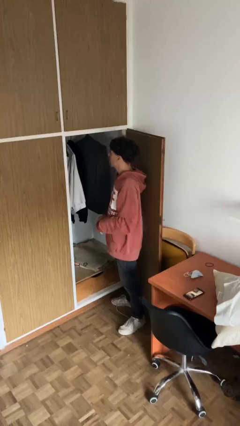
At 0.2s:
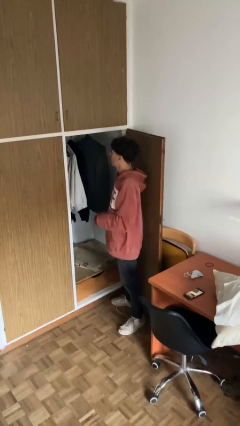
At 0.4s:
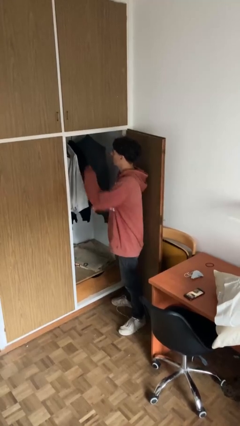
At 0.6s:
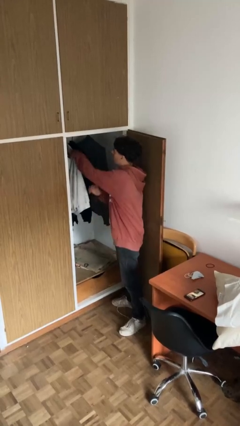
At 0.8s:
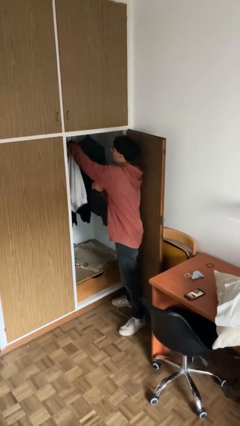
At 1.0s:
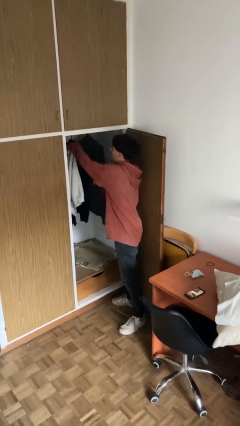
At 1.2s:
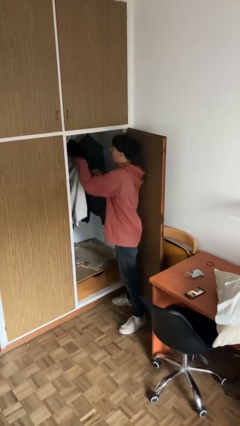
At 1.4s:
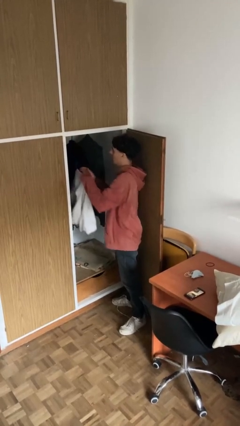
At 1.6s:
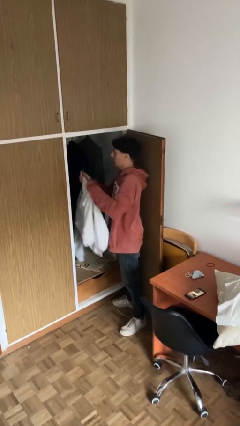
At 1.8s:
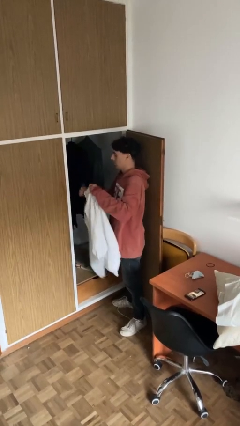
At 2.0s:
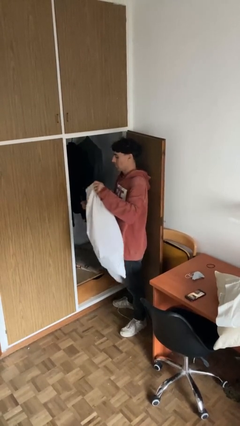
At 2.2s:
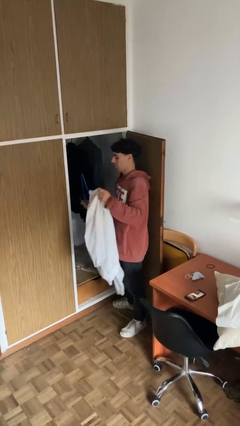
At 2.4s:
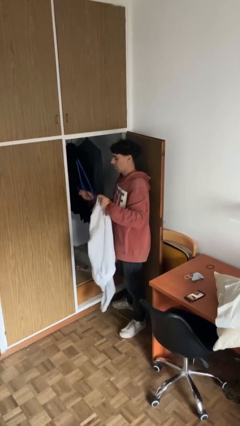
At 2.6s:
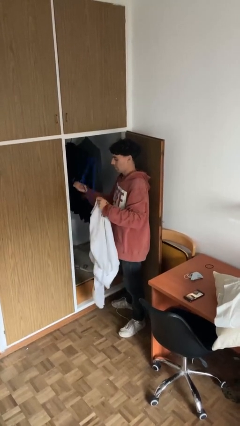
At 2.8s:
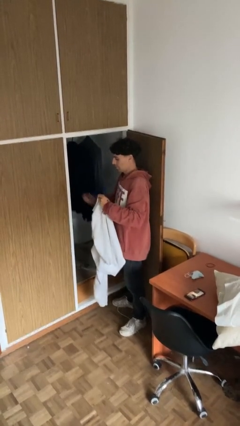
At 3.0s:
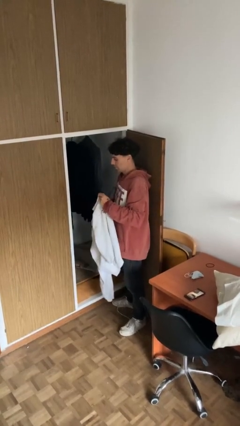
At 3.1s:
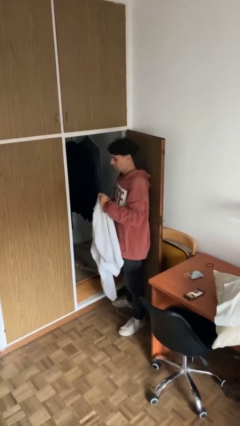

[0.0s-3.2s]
person takes clothes from closet

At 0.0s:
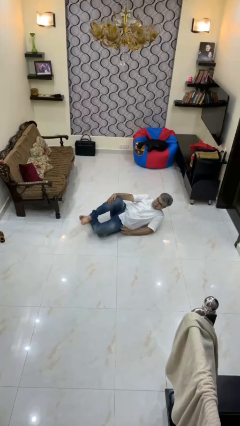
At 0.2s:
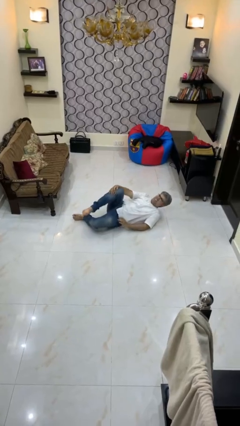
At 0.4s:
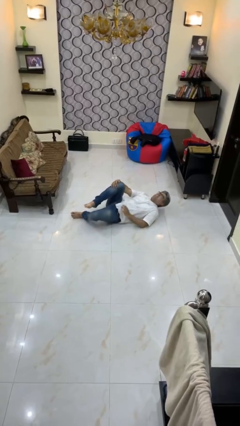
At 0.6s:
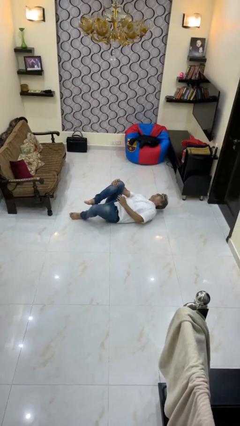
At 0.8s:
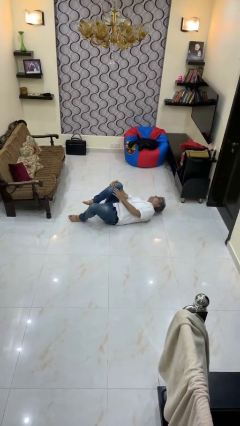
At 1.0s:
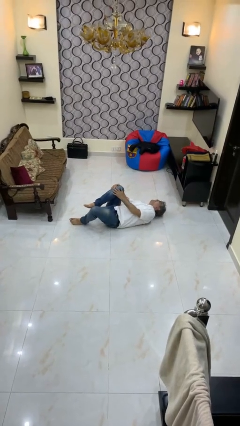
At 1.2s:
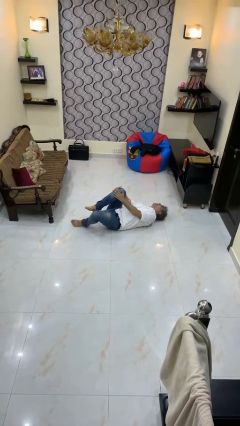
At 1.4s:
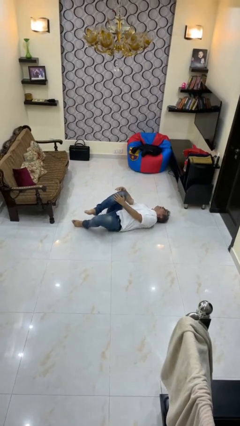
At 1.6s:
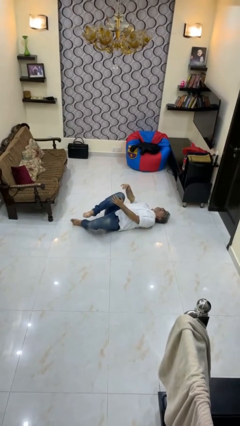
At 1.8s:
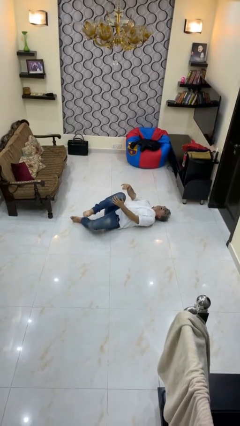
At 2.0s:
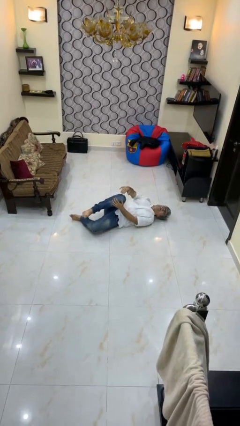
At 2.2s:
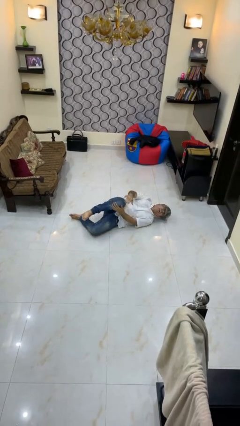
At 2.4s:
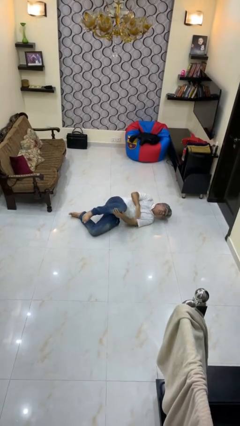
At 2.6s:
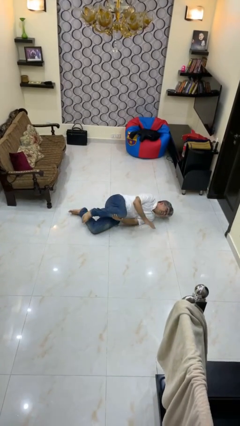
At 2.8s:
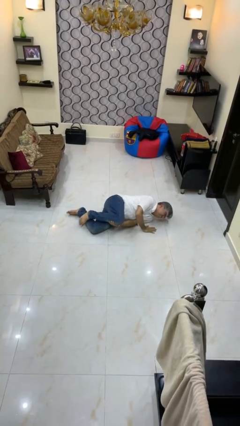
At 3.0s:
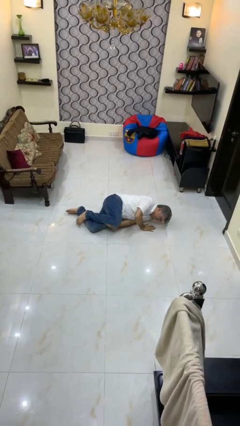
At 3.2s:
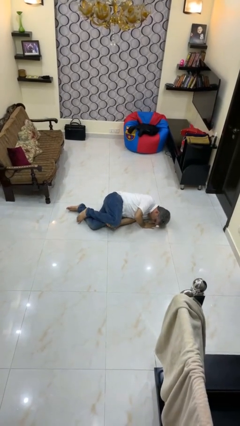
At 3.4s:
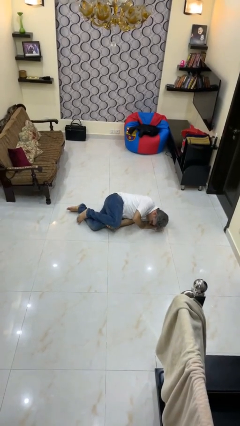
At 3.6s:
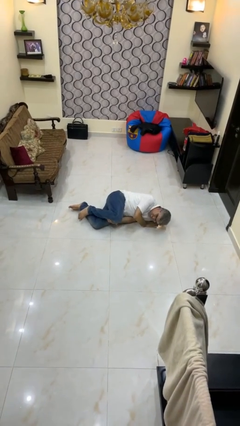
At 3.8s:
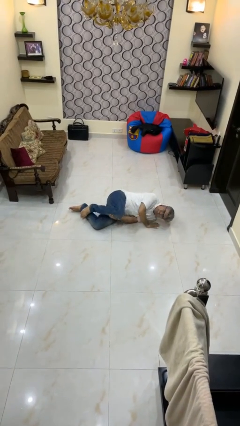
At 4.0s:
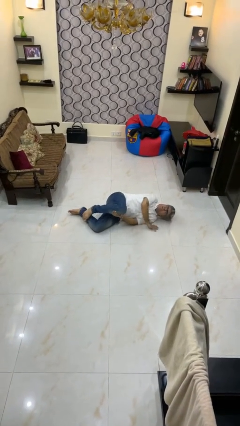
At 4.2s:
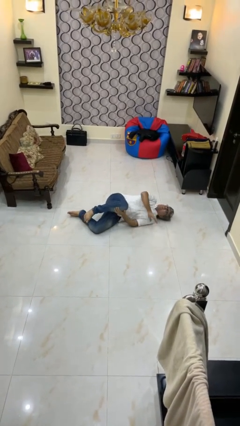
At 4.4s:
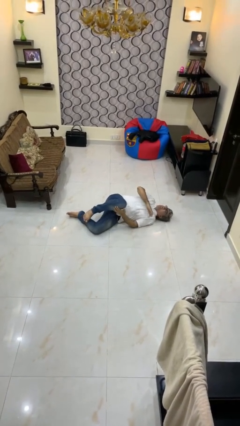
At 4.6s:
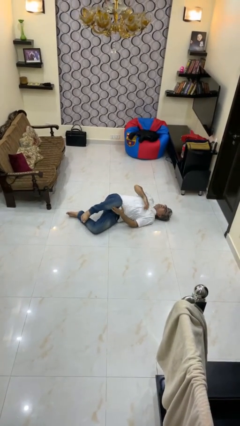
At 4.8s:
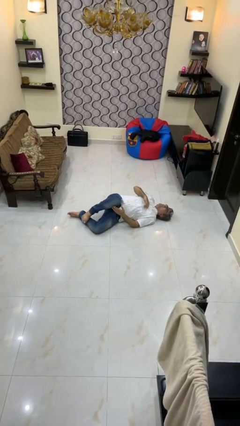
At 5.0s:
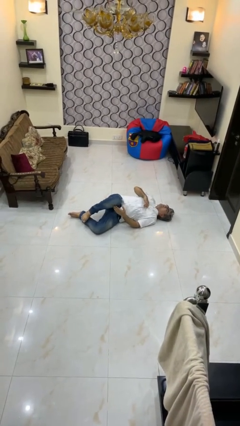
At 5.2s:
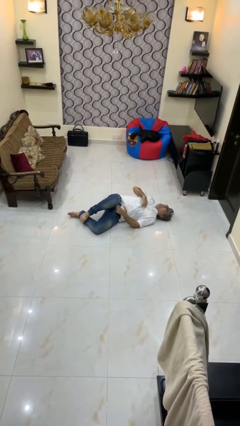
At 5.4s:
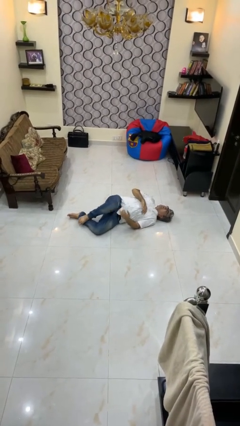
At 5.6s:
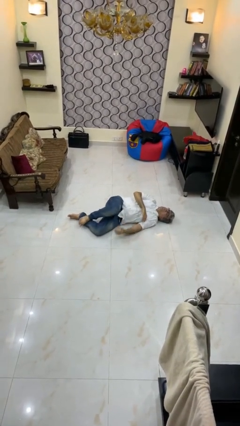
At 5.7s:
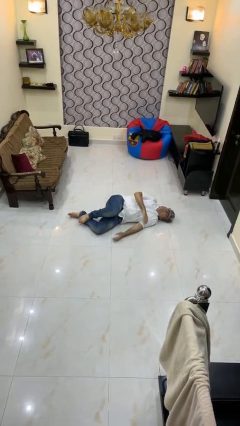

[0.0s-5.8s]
person lies down on floor

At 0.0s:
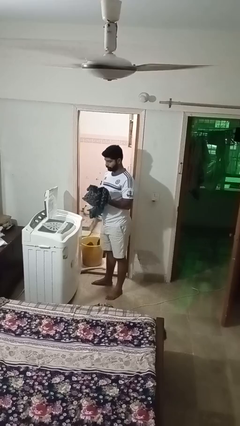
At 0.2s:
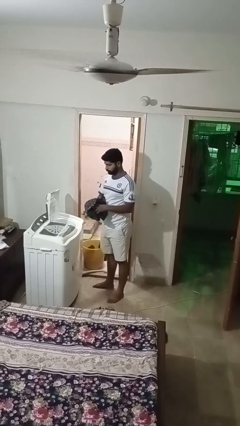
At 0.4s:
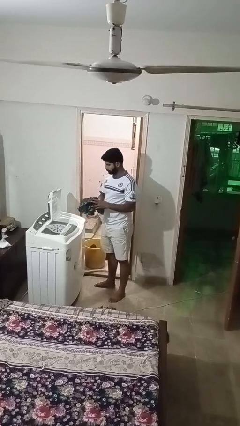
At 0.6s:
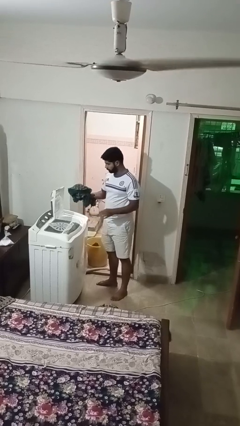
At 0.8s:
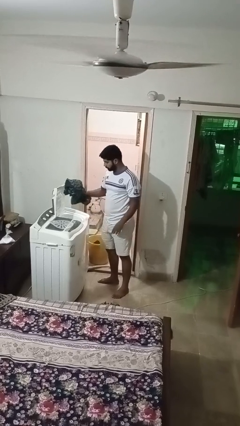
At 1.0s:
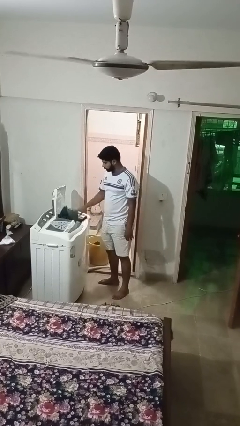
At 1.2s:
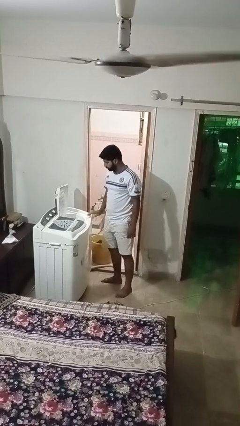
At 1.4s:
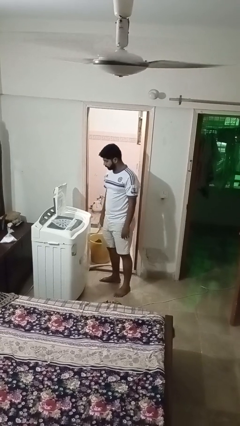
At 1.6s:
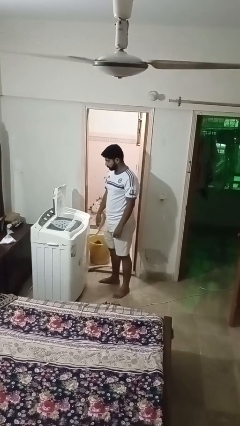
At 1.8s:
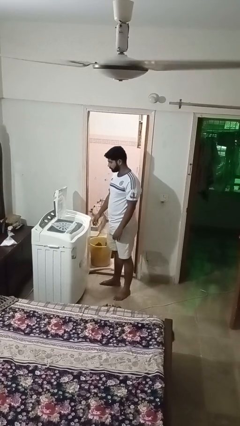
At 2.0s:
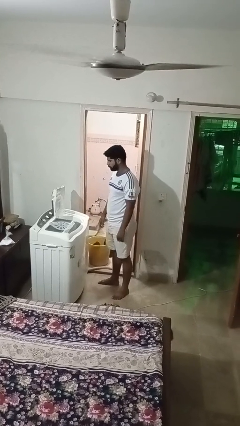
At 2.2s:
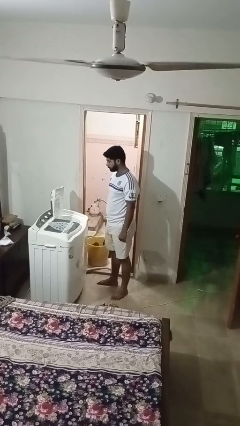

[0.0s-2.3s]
person loads dryer

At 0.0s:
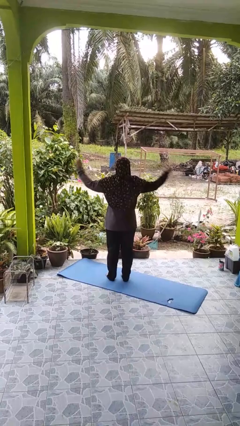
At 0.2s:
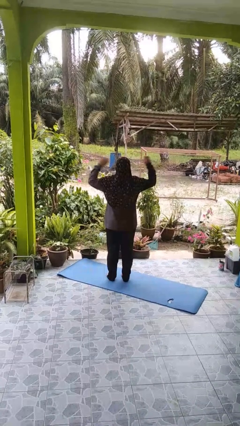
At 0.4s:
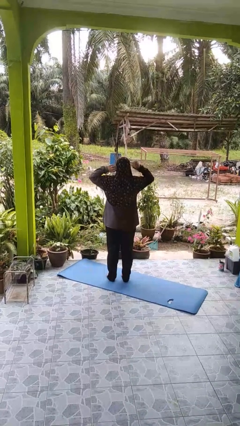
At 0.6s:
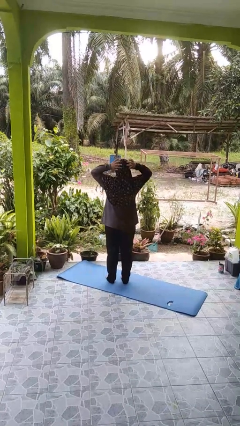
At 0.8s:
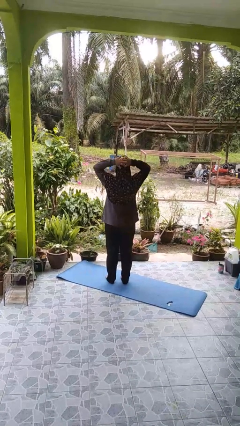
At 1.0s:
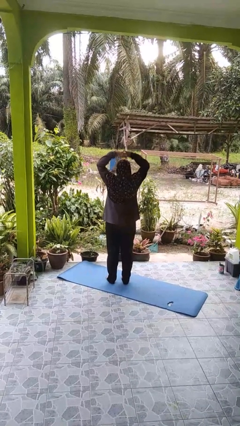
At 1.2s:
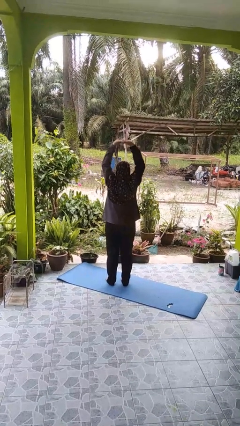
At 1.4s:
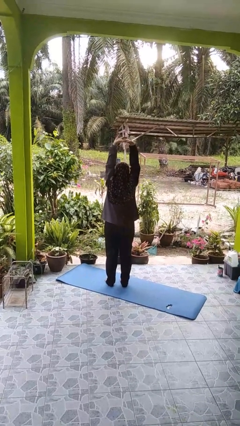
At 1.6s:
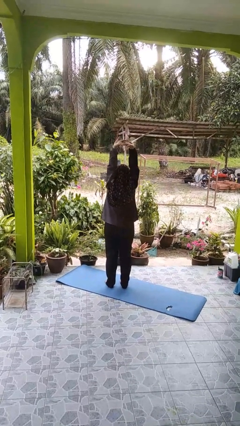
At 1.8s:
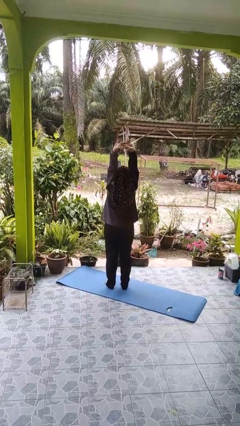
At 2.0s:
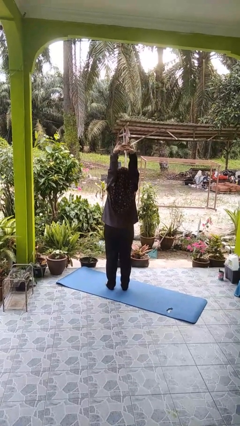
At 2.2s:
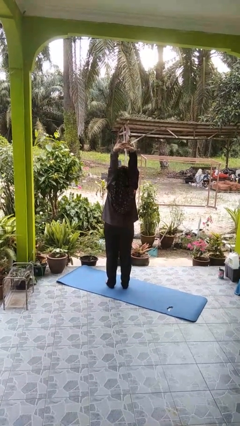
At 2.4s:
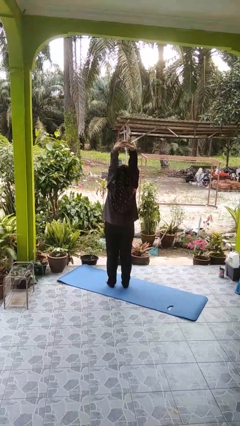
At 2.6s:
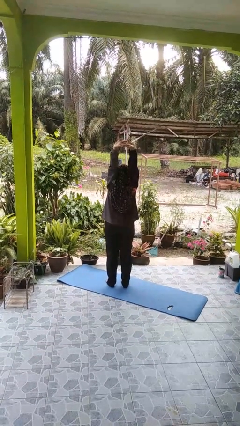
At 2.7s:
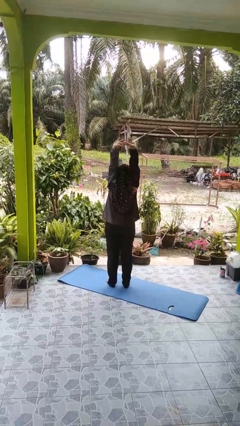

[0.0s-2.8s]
person stretches arms over head

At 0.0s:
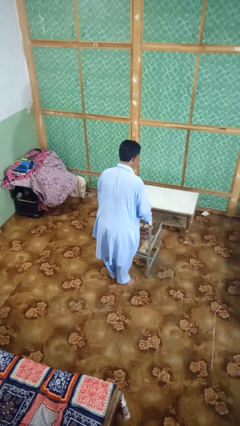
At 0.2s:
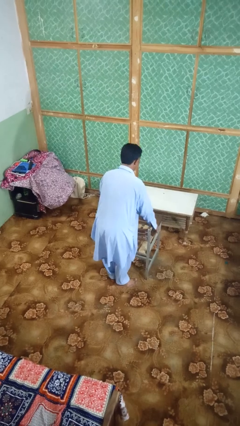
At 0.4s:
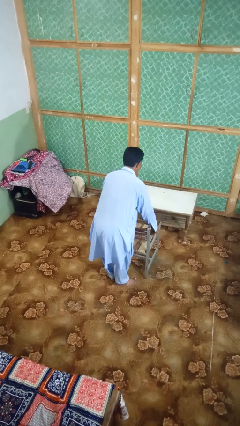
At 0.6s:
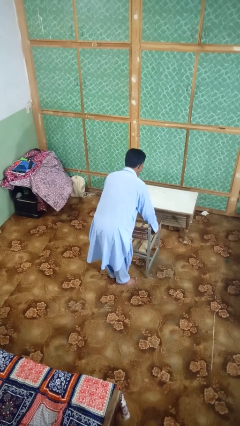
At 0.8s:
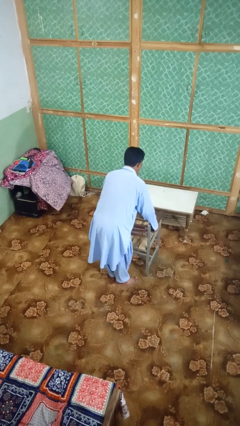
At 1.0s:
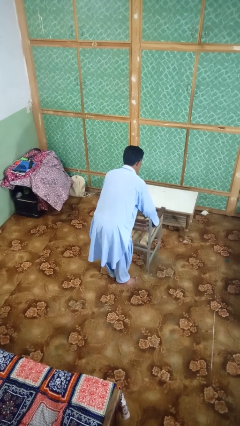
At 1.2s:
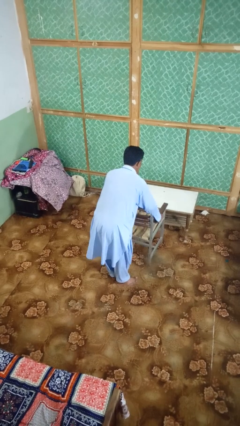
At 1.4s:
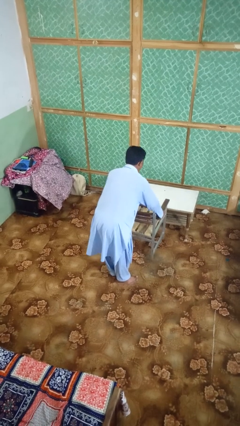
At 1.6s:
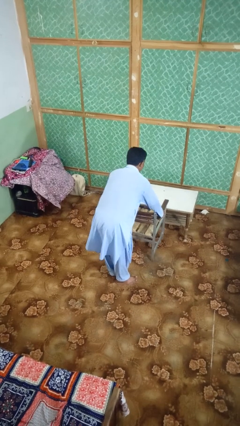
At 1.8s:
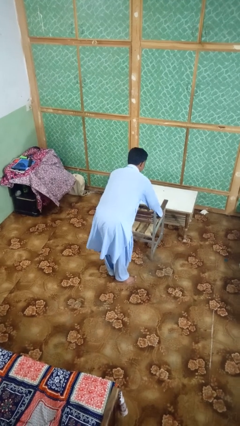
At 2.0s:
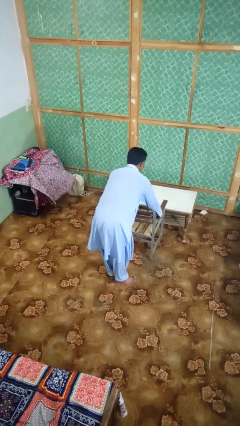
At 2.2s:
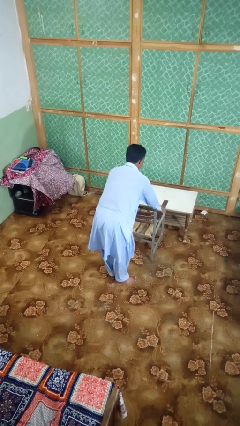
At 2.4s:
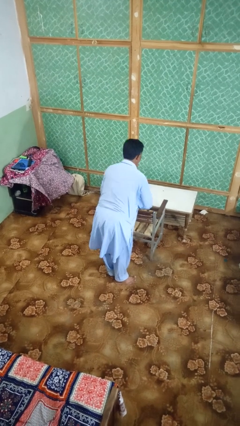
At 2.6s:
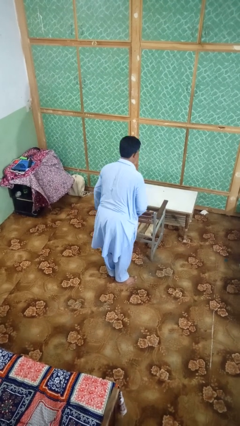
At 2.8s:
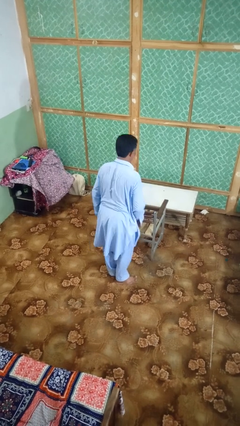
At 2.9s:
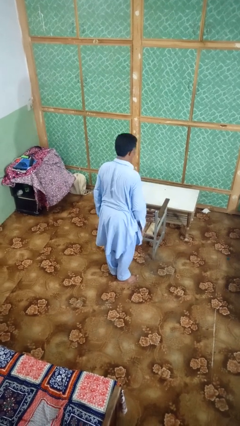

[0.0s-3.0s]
person pushes in chair

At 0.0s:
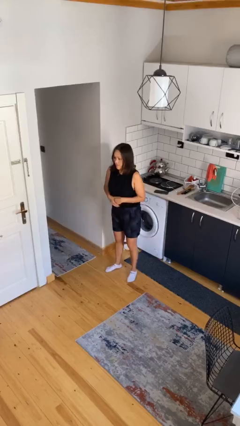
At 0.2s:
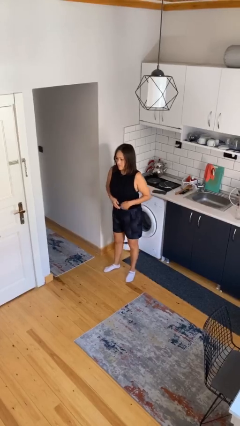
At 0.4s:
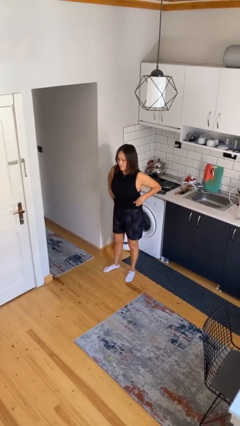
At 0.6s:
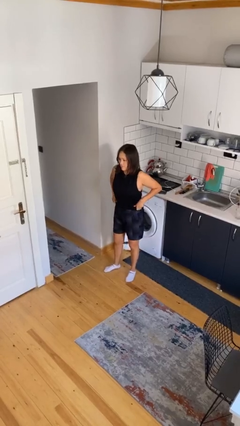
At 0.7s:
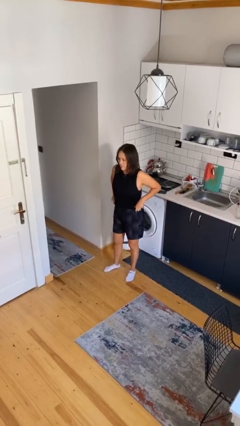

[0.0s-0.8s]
person untucks shirt
